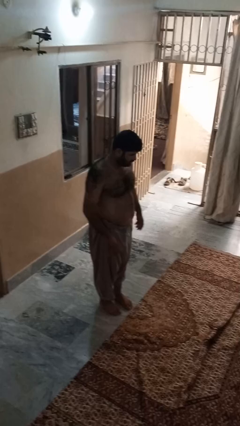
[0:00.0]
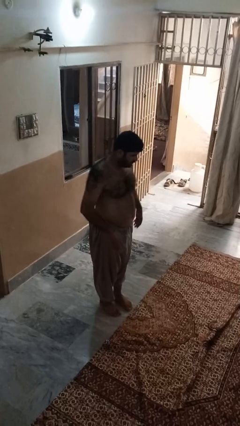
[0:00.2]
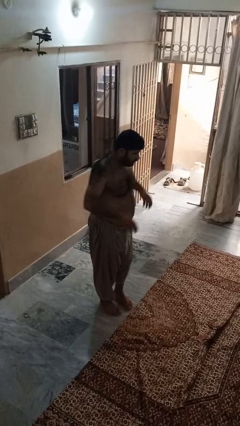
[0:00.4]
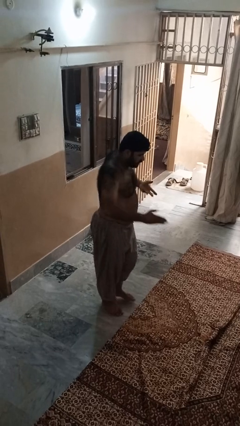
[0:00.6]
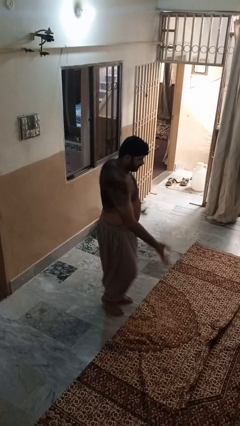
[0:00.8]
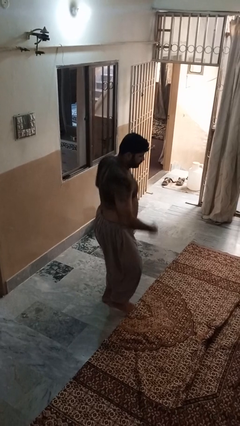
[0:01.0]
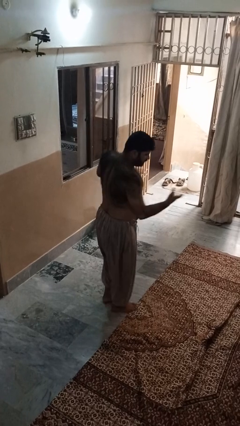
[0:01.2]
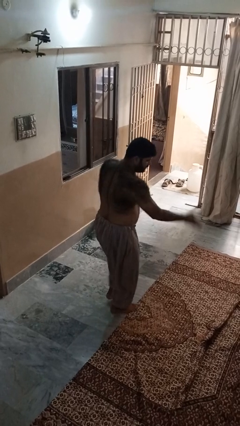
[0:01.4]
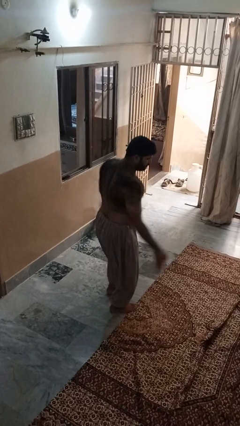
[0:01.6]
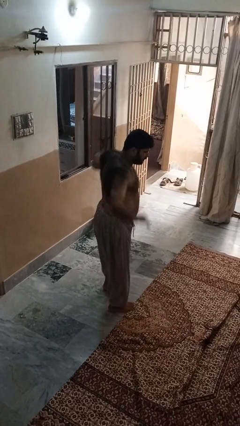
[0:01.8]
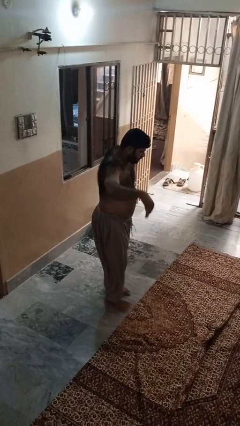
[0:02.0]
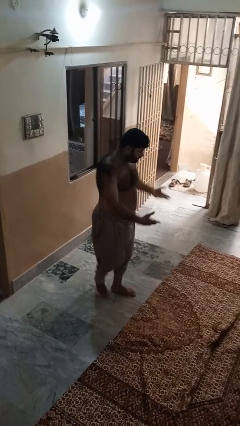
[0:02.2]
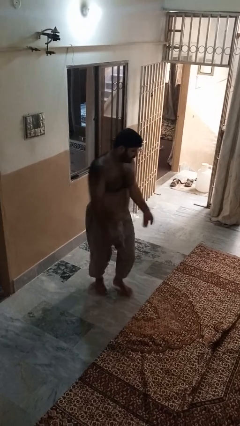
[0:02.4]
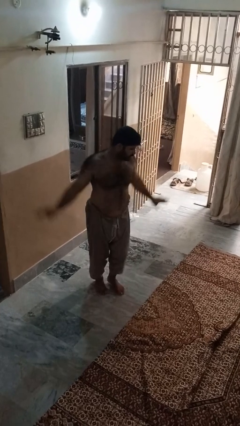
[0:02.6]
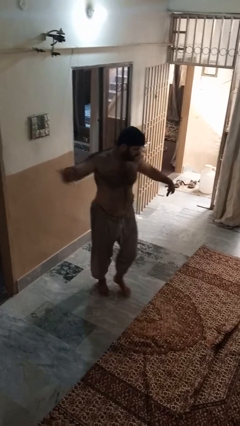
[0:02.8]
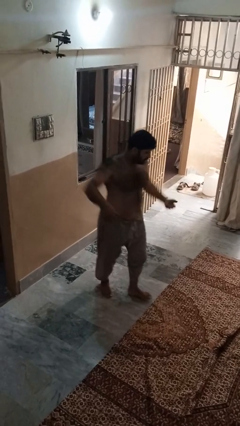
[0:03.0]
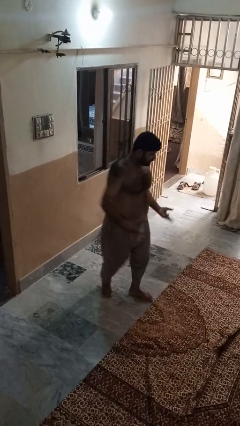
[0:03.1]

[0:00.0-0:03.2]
person dances in place

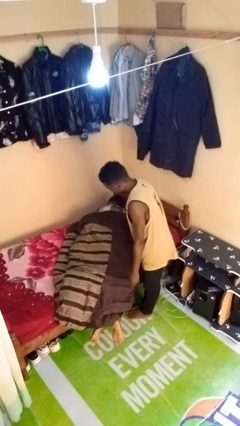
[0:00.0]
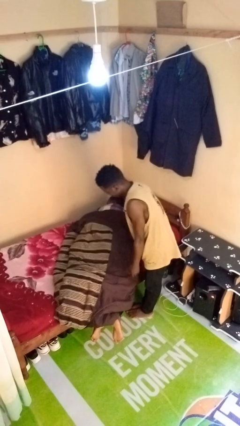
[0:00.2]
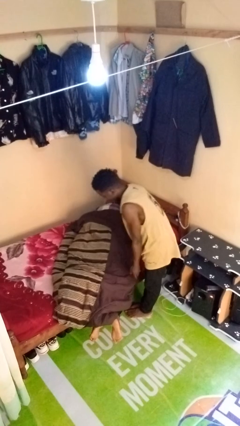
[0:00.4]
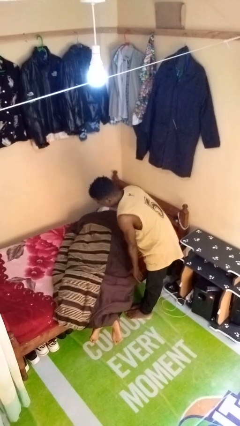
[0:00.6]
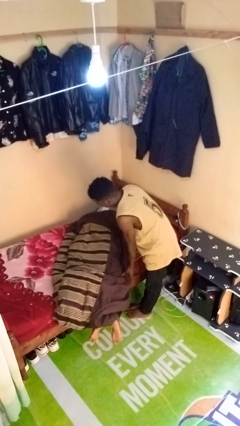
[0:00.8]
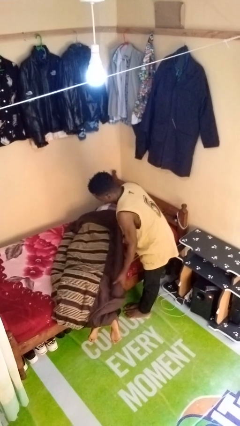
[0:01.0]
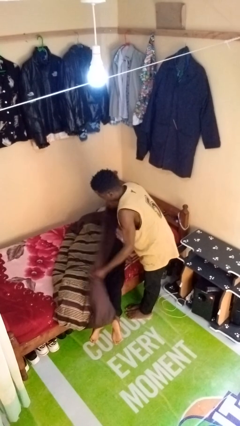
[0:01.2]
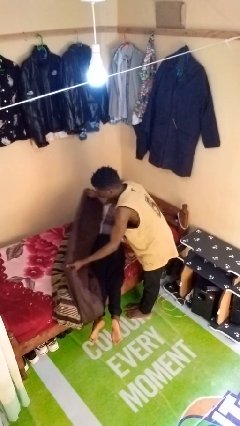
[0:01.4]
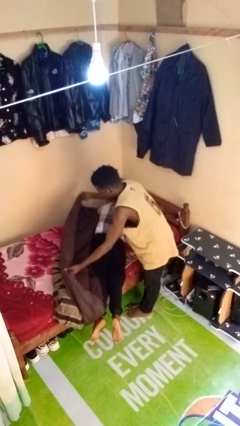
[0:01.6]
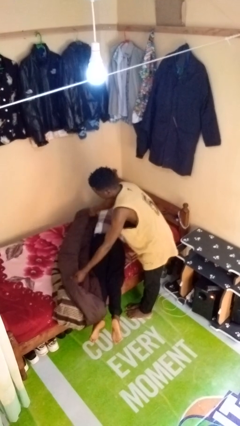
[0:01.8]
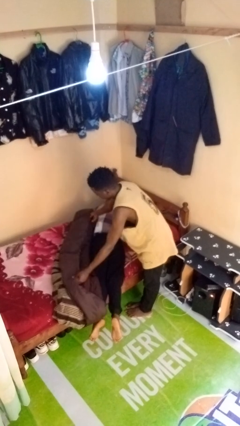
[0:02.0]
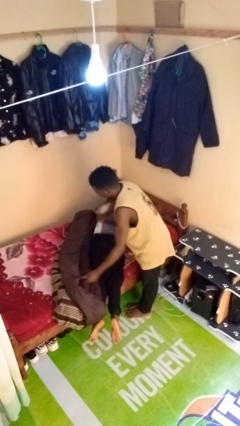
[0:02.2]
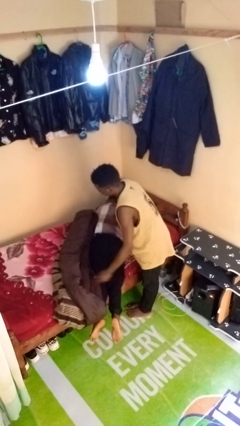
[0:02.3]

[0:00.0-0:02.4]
person uncovers friend with blanket

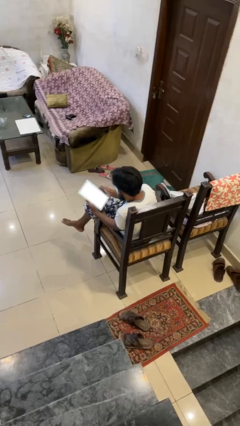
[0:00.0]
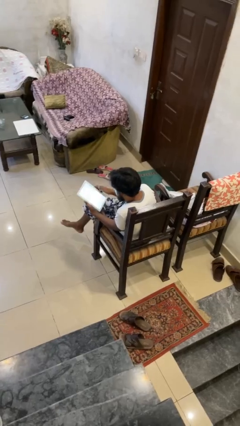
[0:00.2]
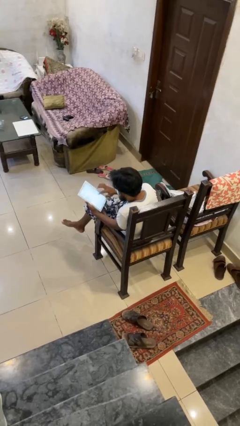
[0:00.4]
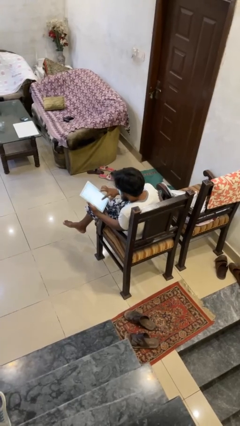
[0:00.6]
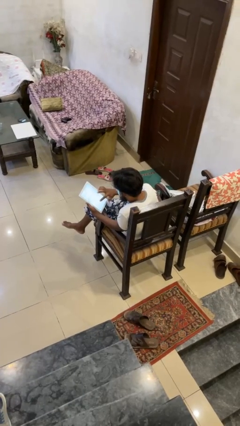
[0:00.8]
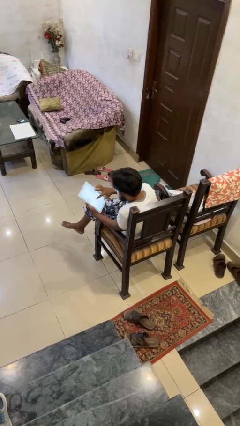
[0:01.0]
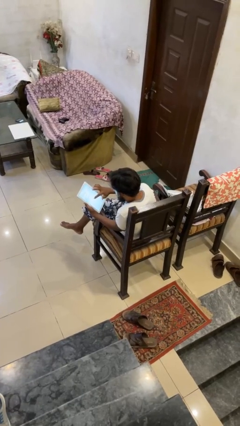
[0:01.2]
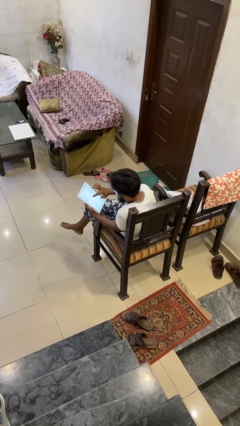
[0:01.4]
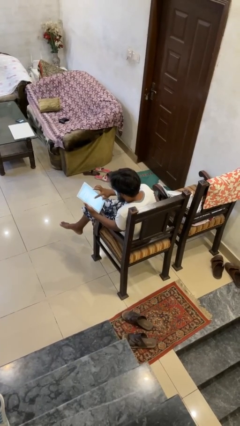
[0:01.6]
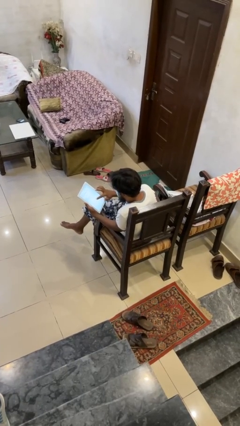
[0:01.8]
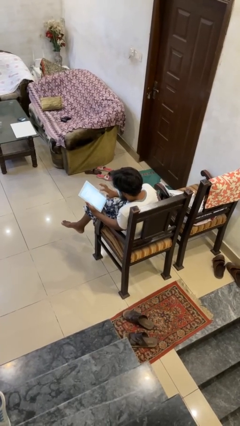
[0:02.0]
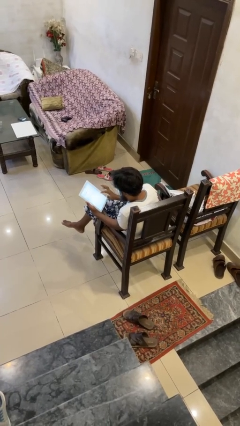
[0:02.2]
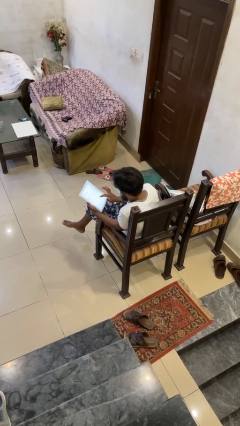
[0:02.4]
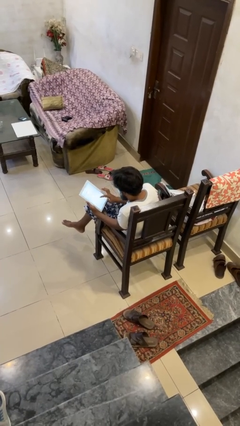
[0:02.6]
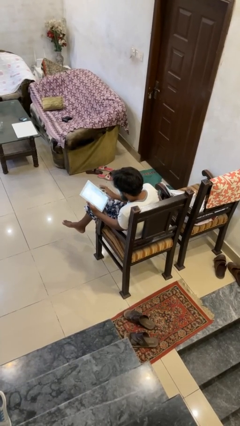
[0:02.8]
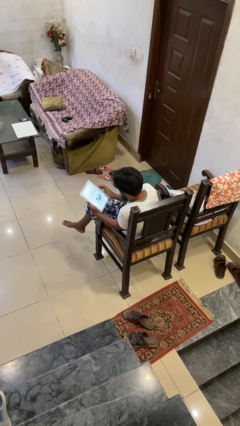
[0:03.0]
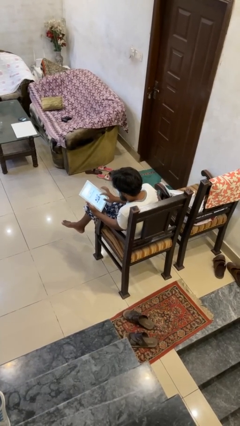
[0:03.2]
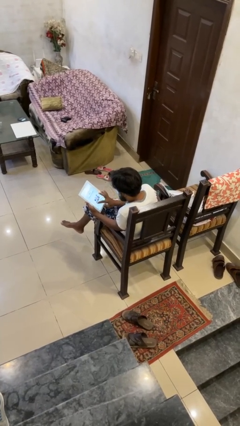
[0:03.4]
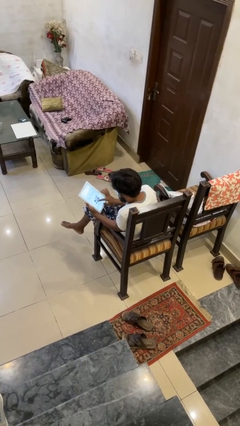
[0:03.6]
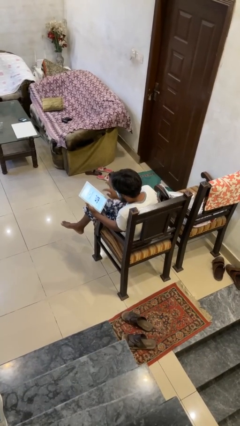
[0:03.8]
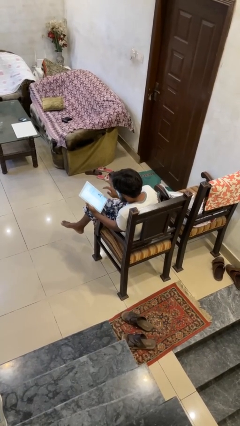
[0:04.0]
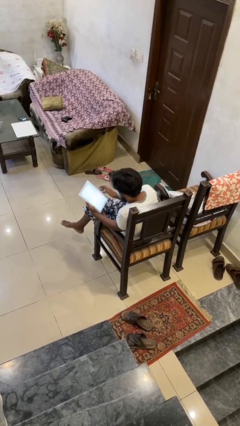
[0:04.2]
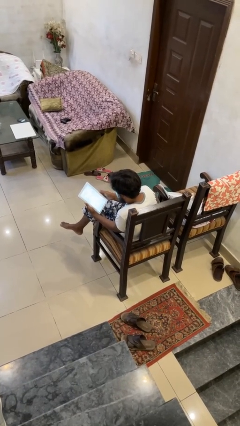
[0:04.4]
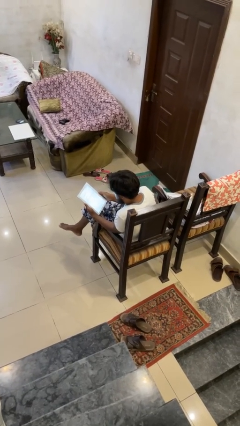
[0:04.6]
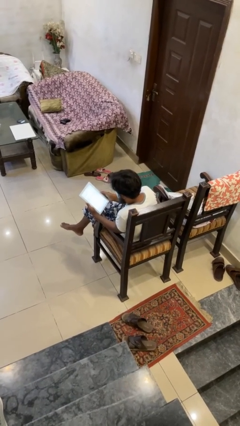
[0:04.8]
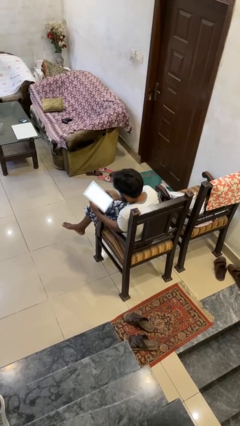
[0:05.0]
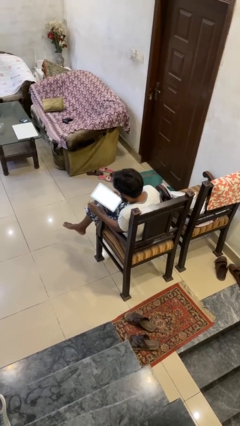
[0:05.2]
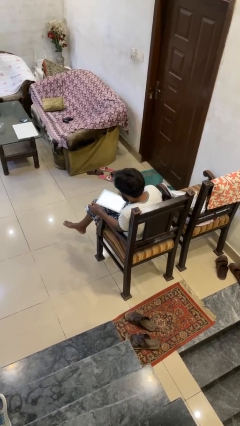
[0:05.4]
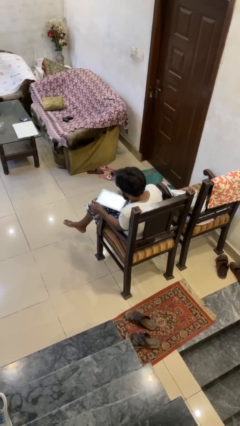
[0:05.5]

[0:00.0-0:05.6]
person interacts with tablet

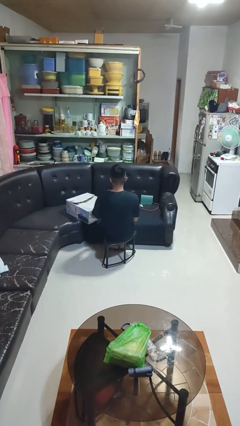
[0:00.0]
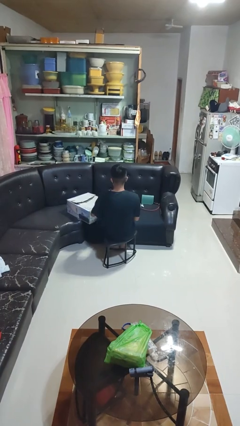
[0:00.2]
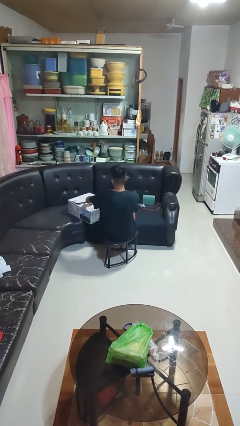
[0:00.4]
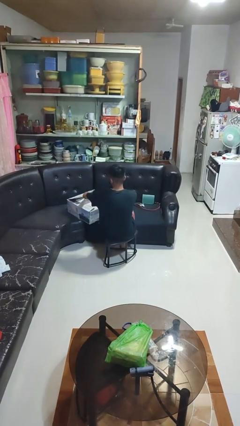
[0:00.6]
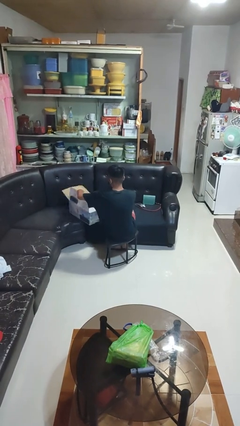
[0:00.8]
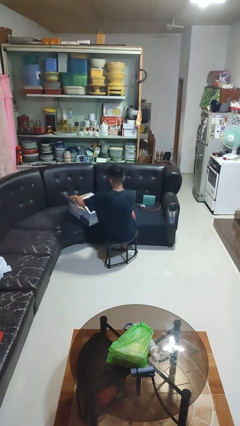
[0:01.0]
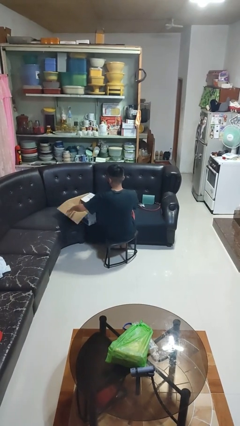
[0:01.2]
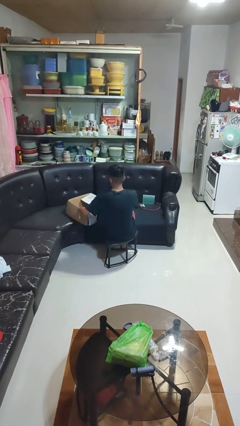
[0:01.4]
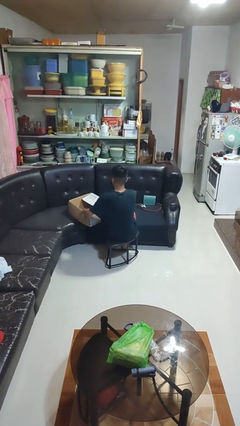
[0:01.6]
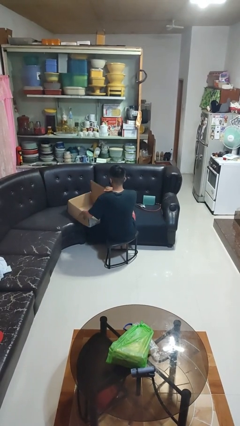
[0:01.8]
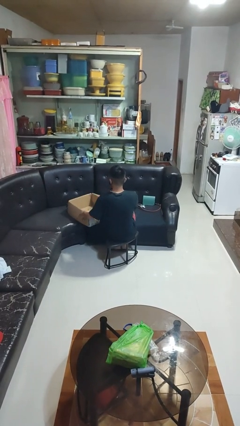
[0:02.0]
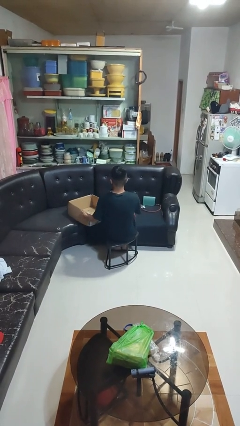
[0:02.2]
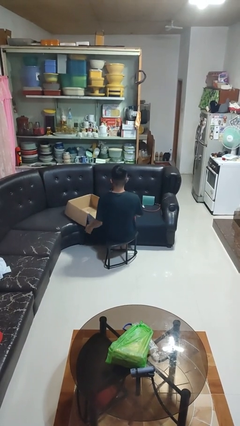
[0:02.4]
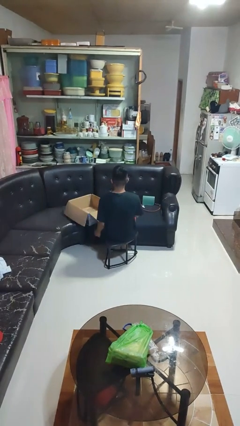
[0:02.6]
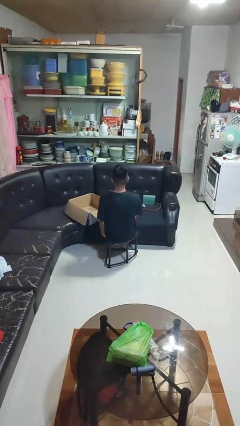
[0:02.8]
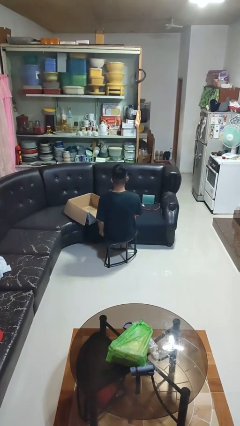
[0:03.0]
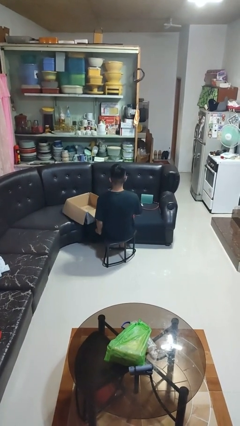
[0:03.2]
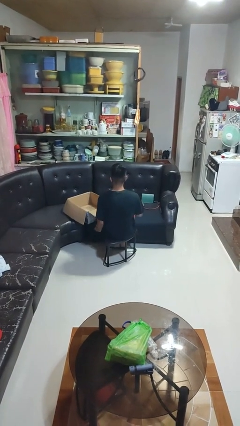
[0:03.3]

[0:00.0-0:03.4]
person opens box

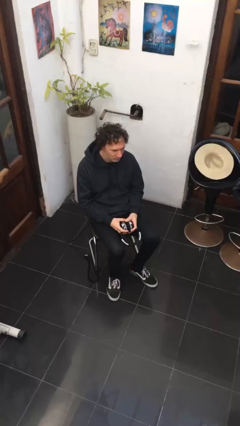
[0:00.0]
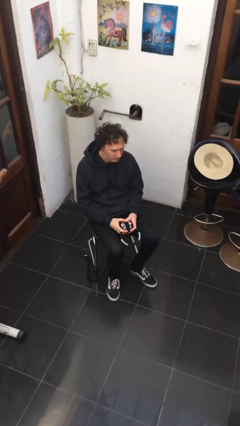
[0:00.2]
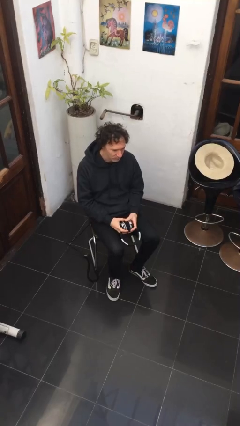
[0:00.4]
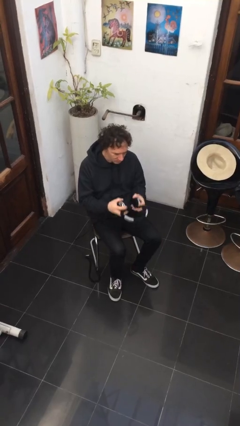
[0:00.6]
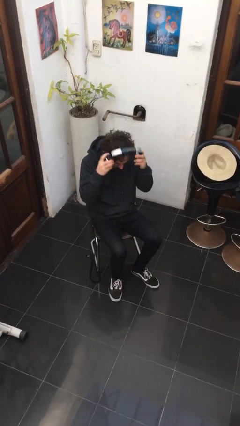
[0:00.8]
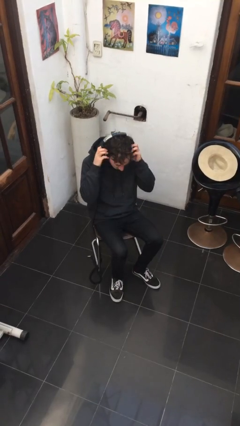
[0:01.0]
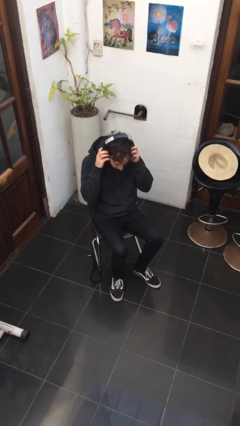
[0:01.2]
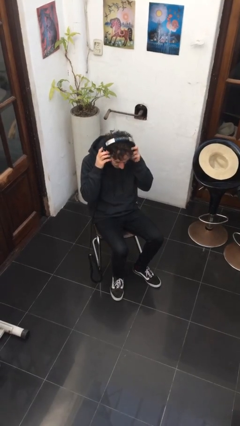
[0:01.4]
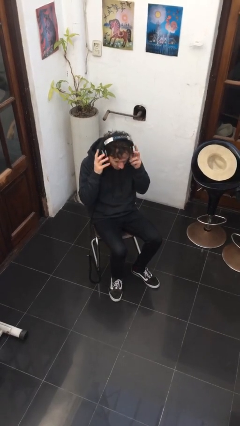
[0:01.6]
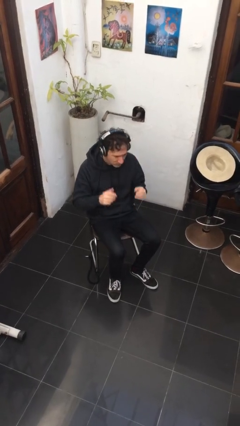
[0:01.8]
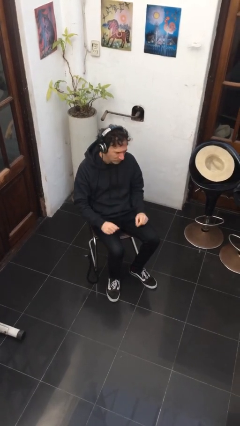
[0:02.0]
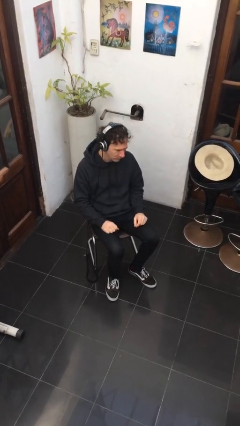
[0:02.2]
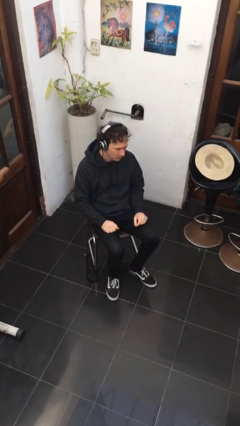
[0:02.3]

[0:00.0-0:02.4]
person puts on headphones

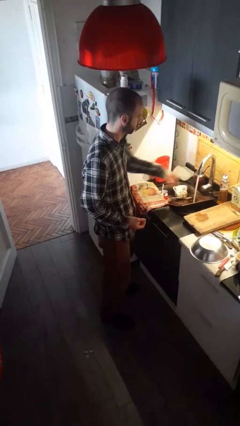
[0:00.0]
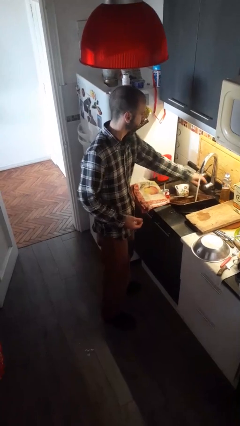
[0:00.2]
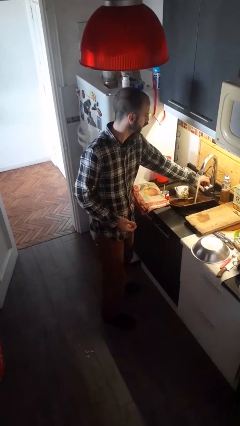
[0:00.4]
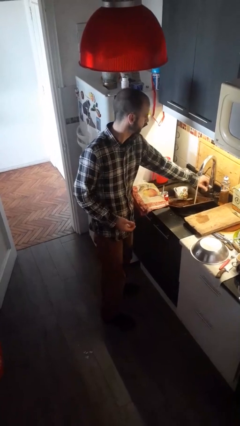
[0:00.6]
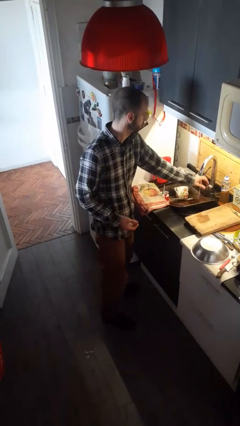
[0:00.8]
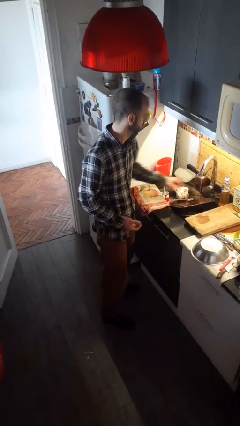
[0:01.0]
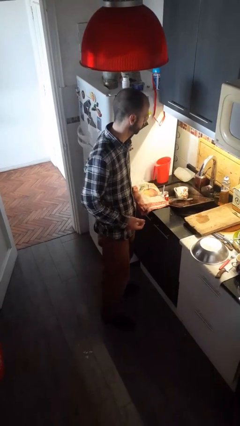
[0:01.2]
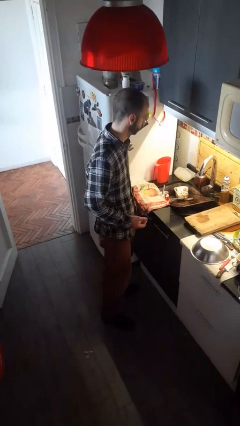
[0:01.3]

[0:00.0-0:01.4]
person turns off faucet
